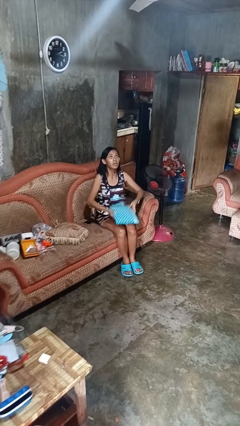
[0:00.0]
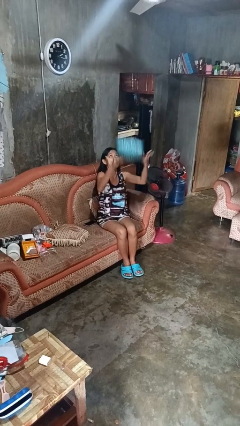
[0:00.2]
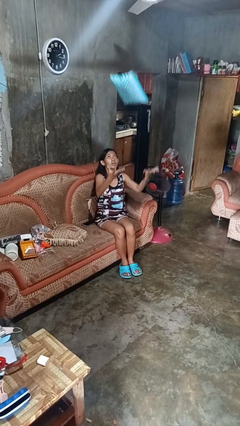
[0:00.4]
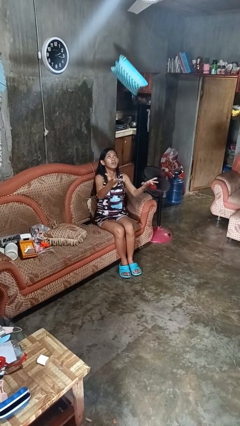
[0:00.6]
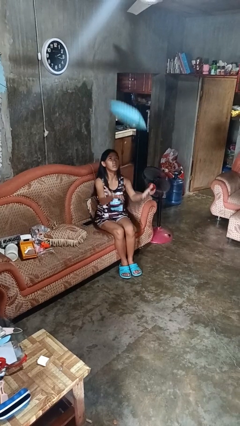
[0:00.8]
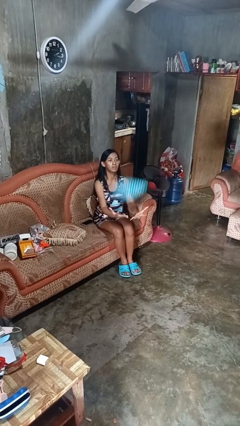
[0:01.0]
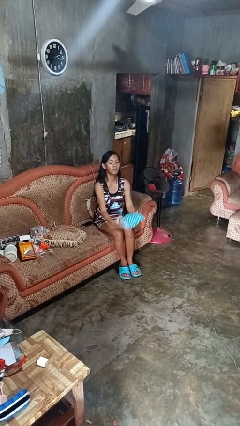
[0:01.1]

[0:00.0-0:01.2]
person drops object

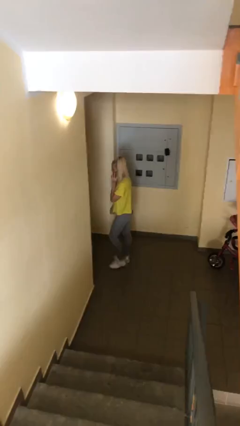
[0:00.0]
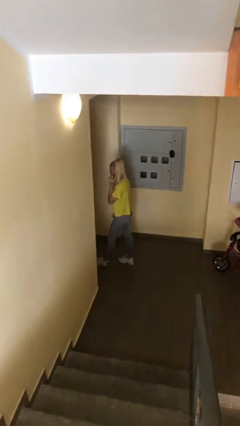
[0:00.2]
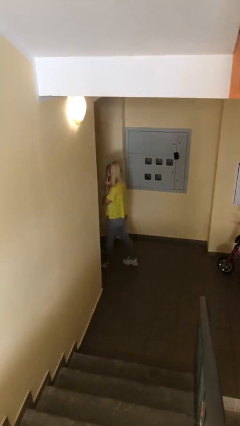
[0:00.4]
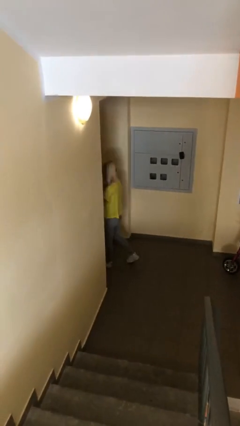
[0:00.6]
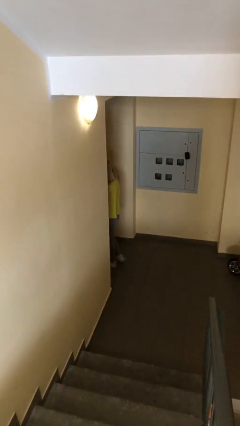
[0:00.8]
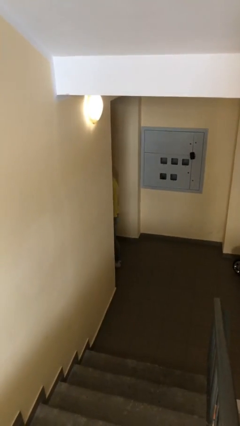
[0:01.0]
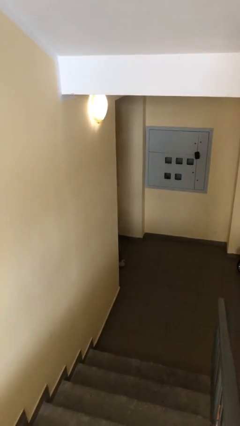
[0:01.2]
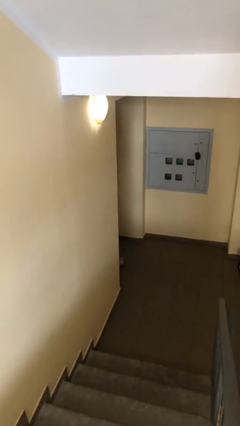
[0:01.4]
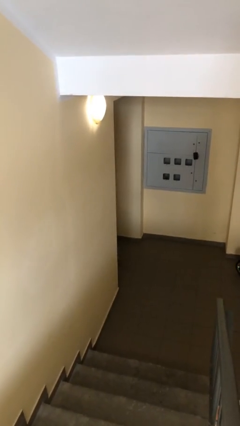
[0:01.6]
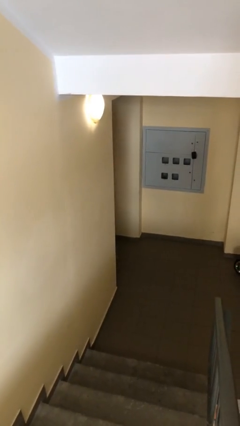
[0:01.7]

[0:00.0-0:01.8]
person exits scene through structure

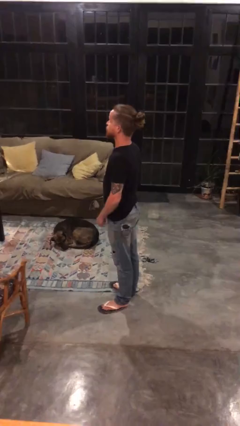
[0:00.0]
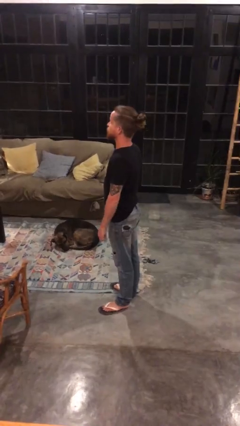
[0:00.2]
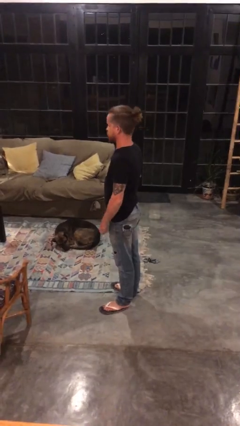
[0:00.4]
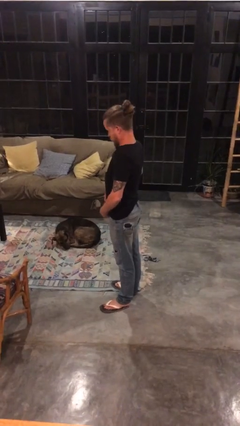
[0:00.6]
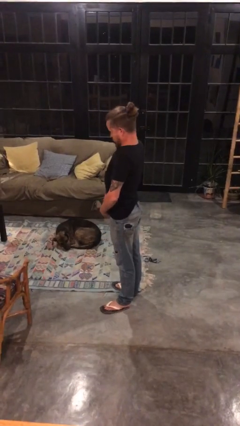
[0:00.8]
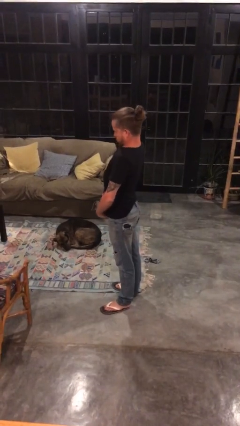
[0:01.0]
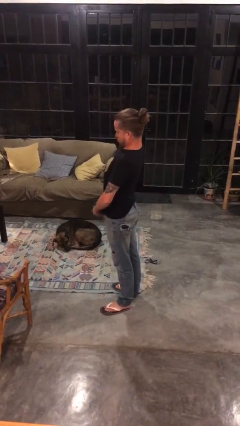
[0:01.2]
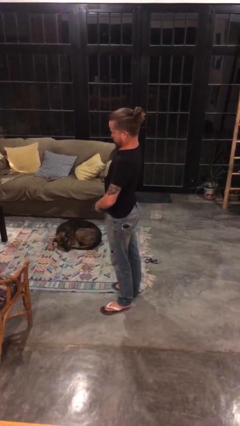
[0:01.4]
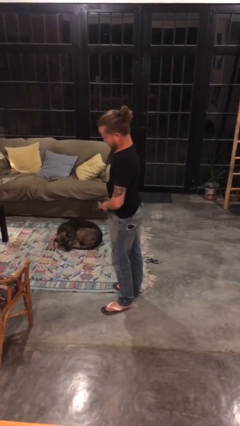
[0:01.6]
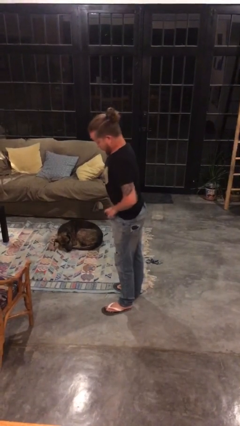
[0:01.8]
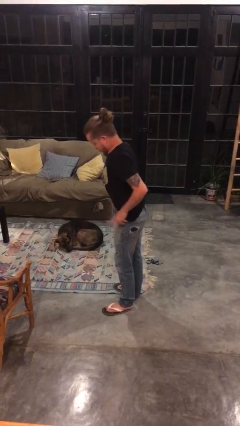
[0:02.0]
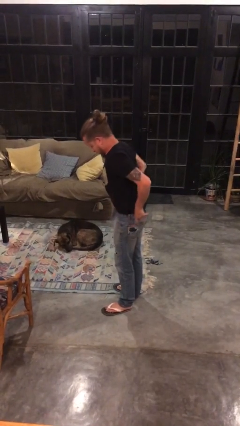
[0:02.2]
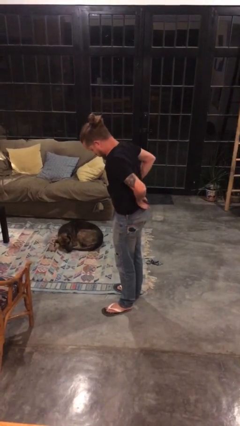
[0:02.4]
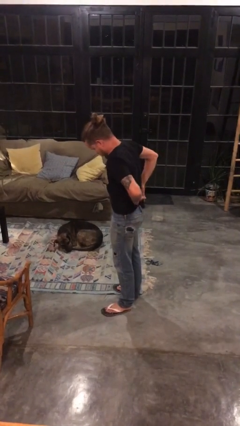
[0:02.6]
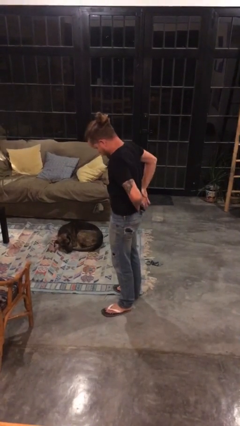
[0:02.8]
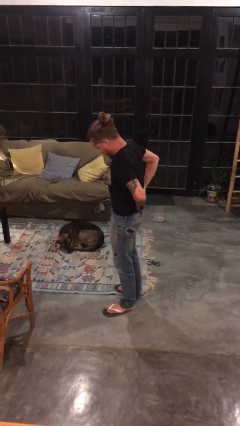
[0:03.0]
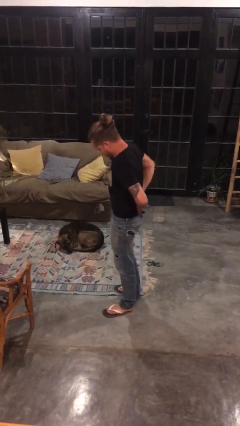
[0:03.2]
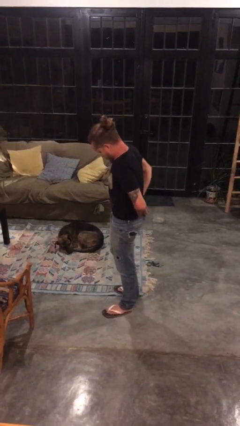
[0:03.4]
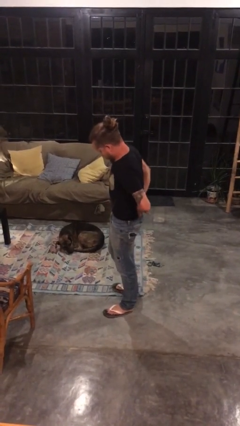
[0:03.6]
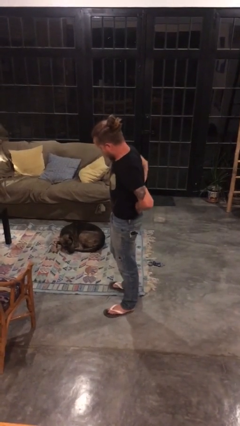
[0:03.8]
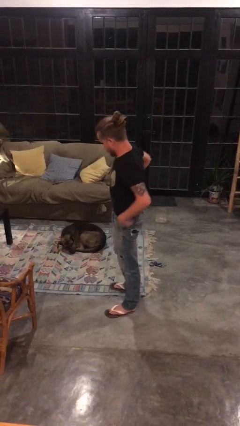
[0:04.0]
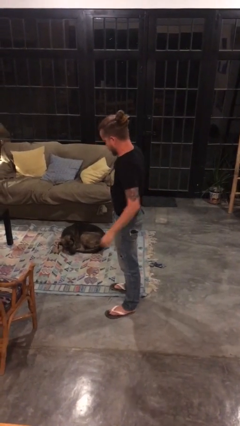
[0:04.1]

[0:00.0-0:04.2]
person tucks in shirt

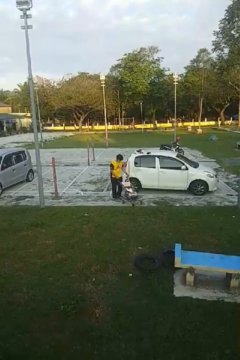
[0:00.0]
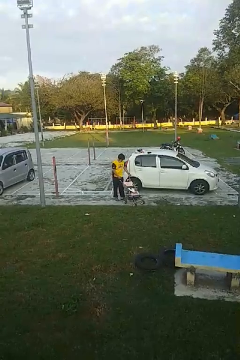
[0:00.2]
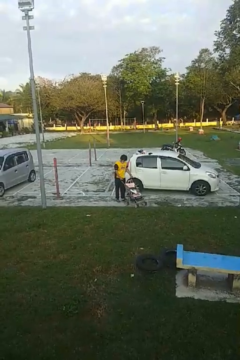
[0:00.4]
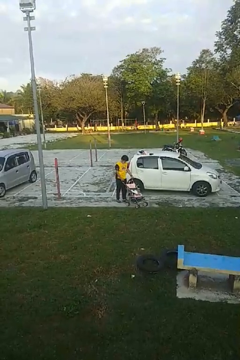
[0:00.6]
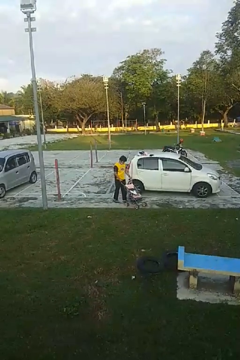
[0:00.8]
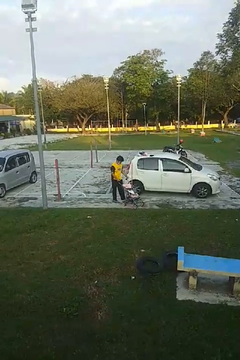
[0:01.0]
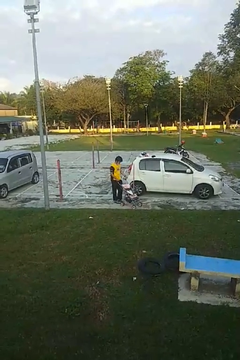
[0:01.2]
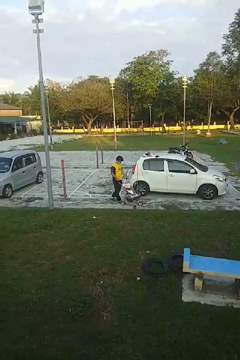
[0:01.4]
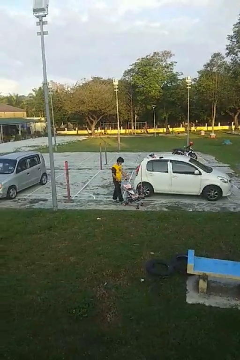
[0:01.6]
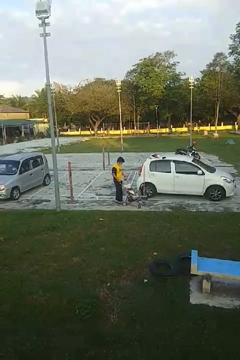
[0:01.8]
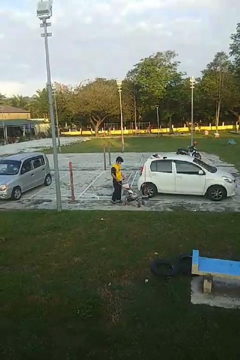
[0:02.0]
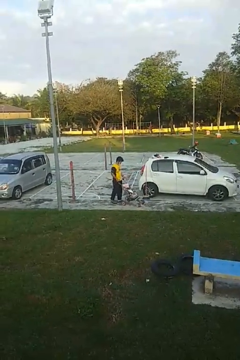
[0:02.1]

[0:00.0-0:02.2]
person pulls wheeled cart

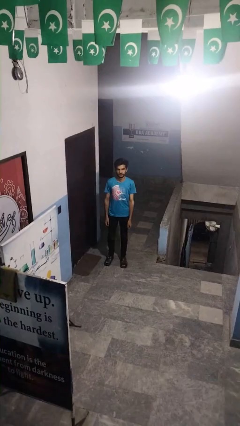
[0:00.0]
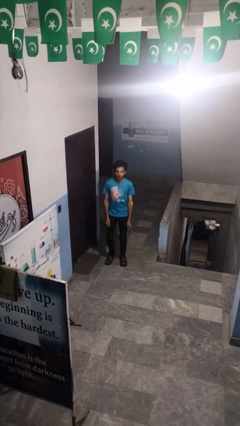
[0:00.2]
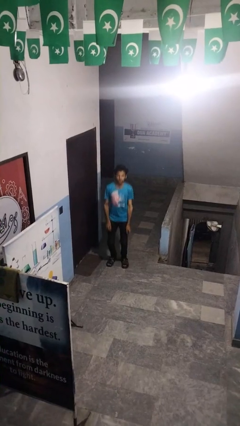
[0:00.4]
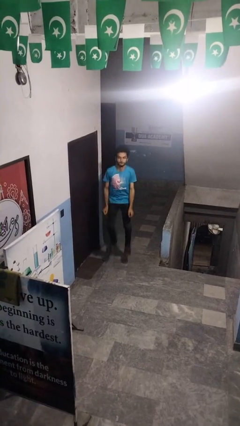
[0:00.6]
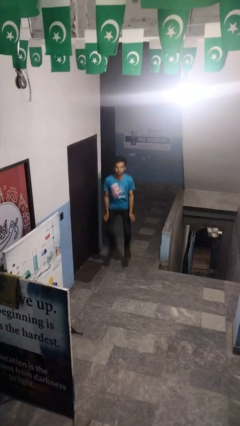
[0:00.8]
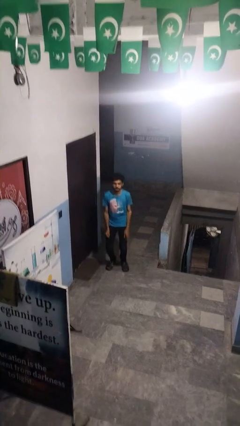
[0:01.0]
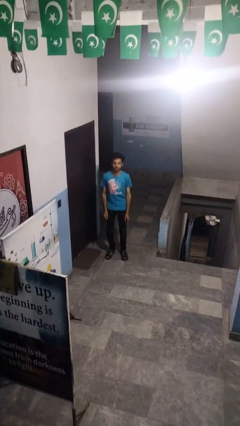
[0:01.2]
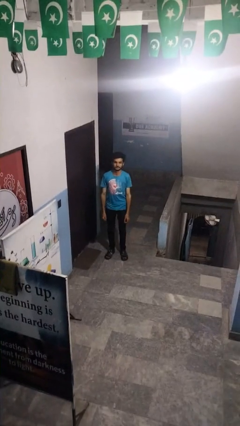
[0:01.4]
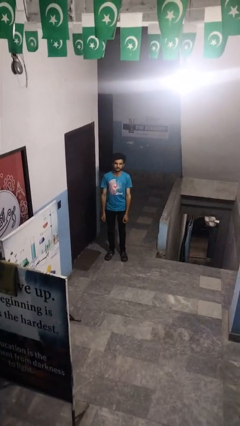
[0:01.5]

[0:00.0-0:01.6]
person jumps

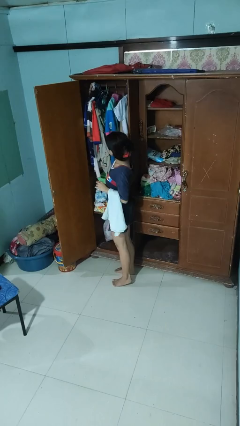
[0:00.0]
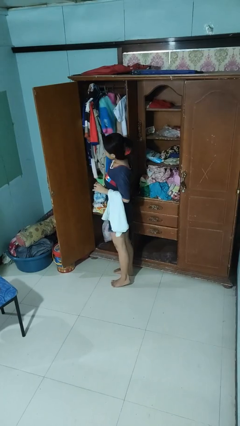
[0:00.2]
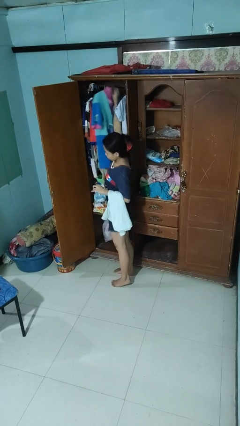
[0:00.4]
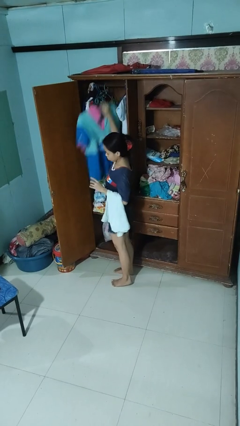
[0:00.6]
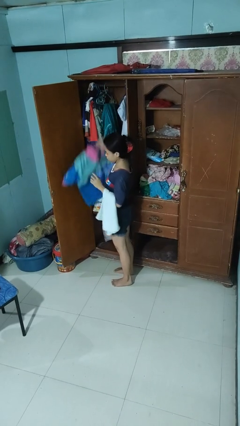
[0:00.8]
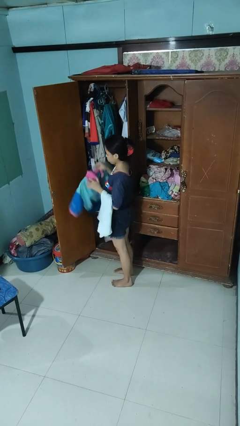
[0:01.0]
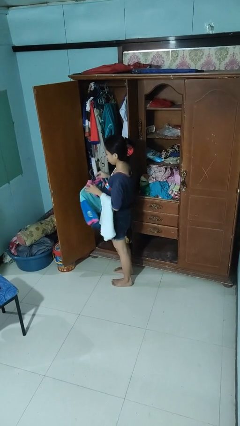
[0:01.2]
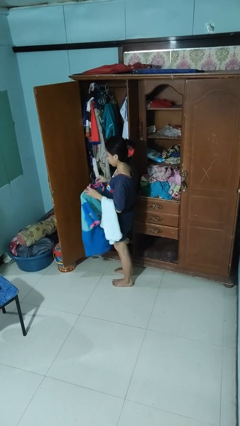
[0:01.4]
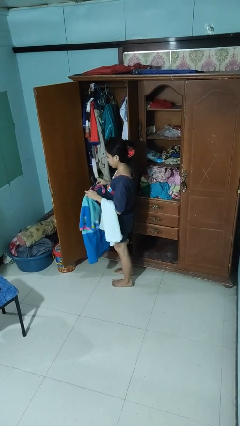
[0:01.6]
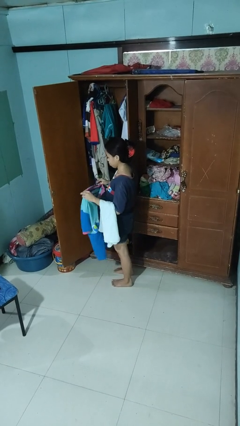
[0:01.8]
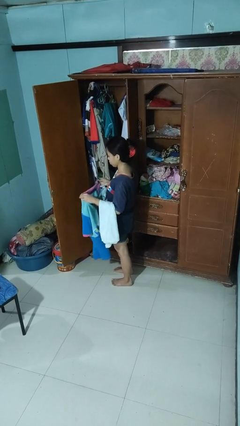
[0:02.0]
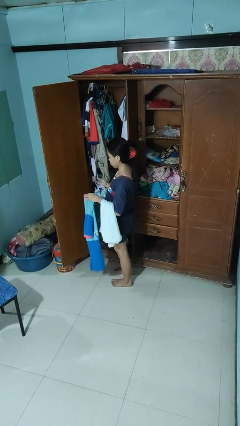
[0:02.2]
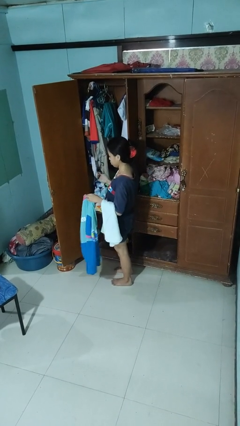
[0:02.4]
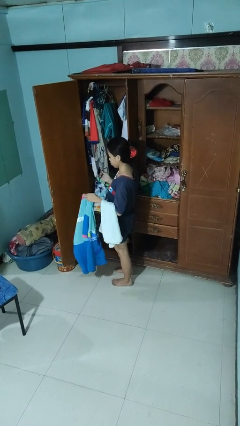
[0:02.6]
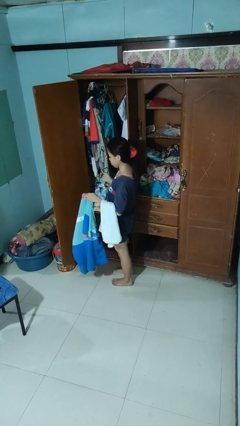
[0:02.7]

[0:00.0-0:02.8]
person takes clothes from closet

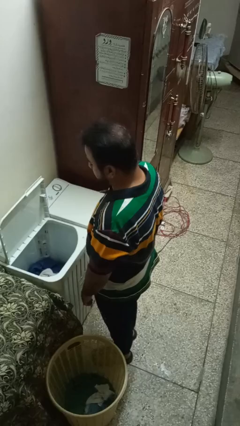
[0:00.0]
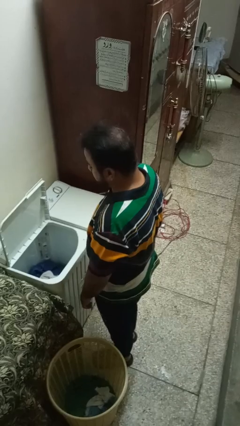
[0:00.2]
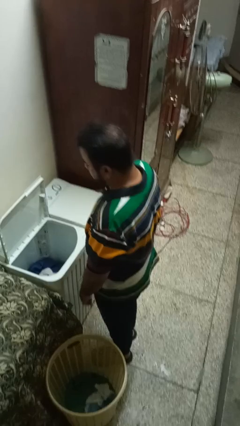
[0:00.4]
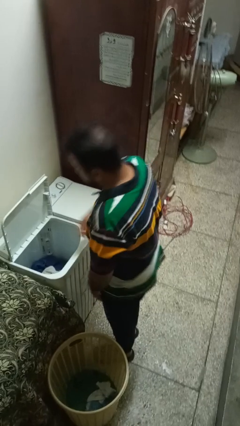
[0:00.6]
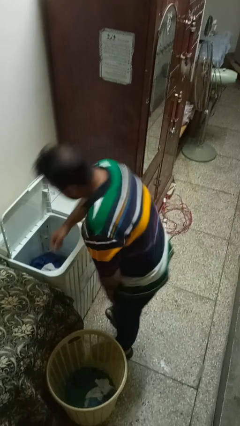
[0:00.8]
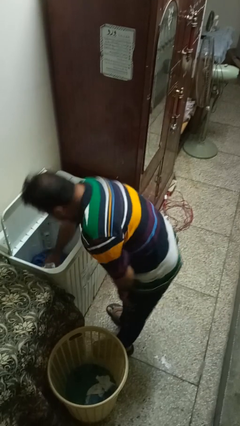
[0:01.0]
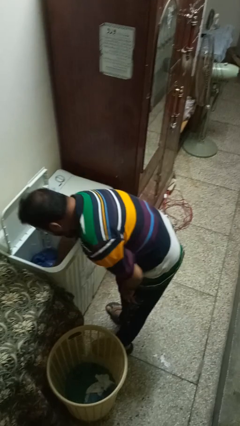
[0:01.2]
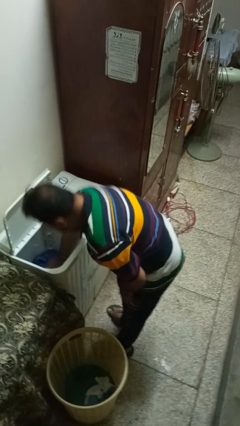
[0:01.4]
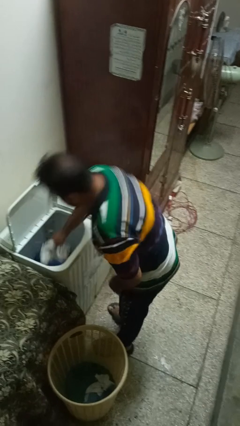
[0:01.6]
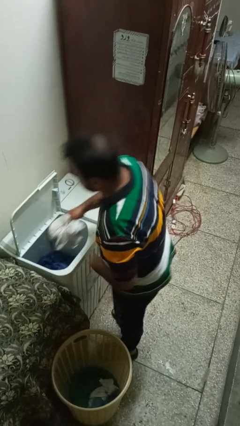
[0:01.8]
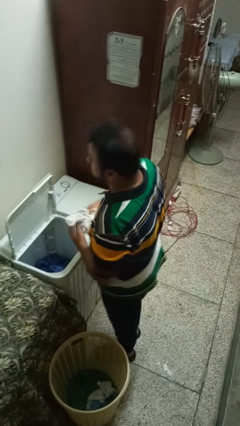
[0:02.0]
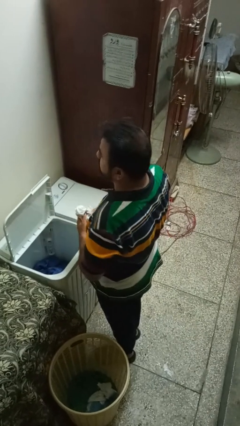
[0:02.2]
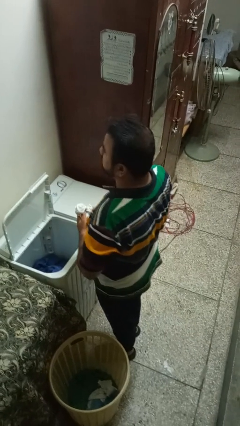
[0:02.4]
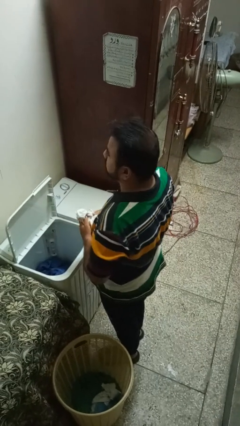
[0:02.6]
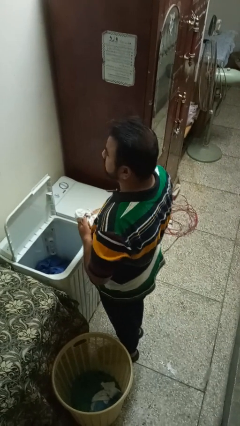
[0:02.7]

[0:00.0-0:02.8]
person unloads clotheswasher

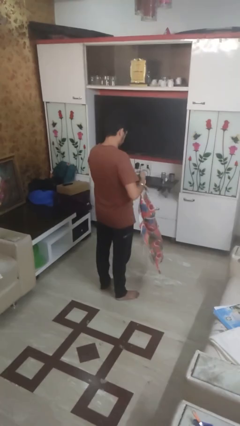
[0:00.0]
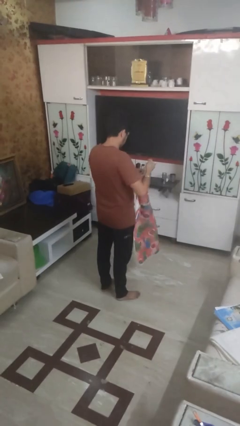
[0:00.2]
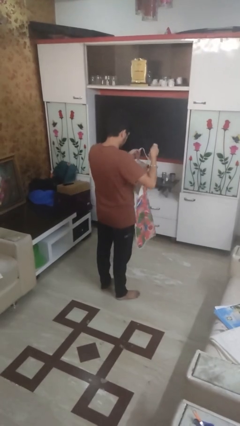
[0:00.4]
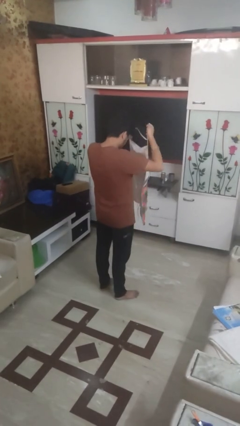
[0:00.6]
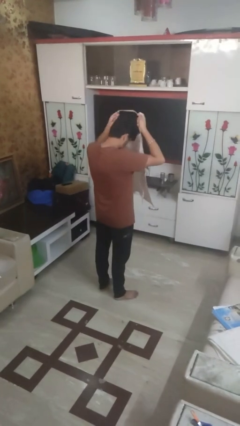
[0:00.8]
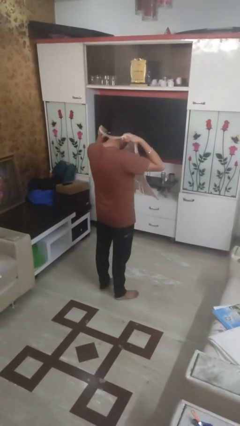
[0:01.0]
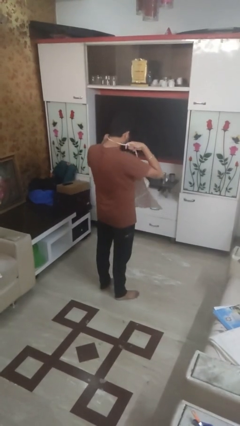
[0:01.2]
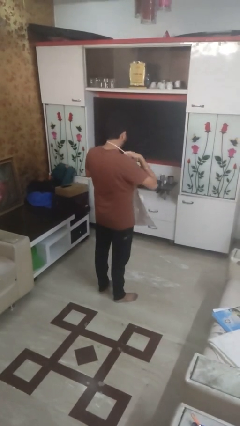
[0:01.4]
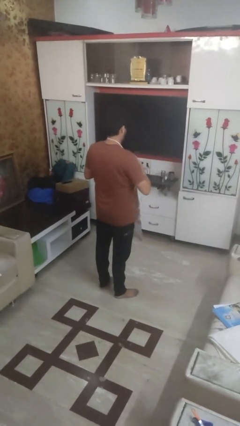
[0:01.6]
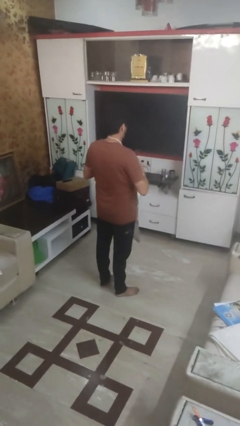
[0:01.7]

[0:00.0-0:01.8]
person puts on apron
